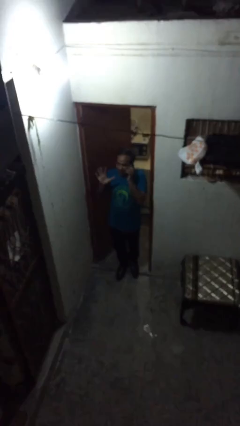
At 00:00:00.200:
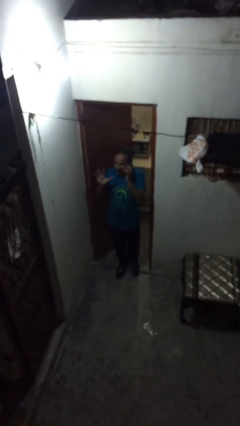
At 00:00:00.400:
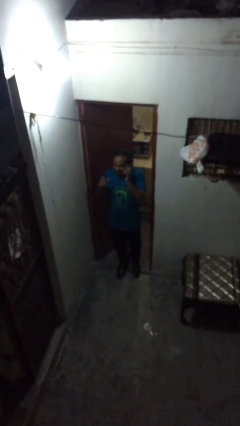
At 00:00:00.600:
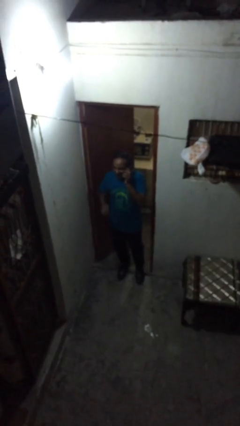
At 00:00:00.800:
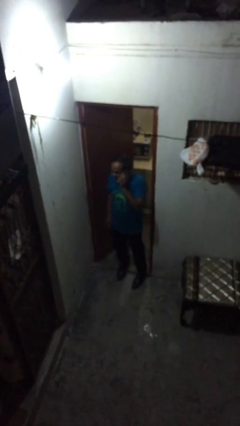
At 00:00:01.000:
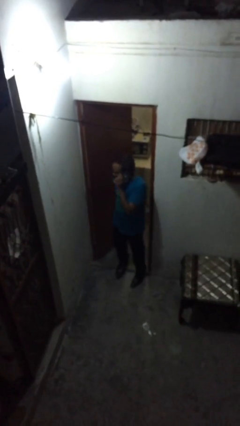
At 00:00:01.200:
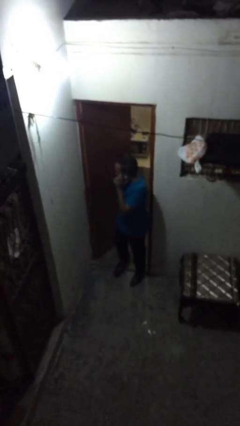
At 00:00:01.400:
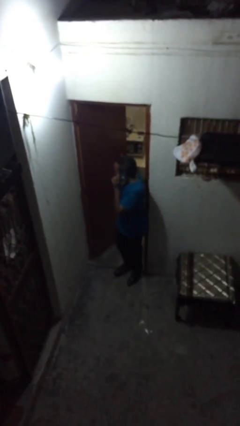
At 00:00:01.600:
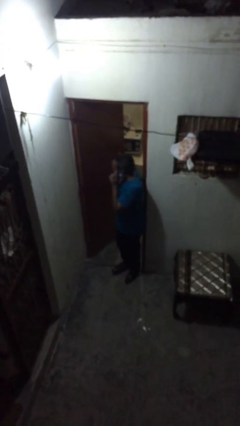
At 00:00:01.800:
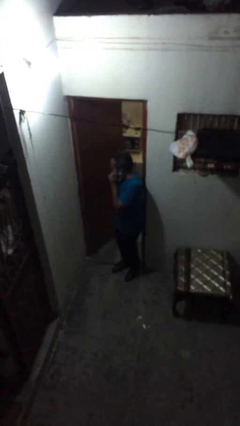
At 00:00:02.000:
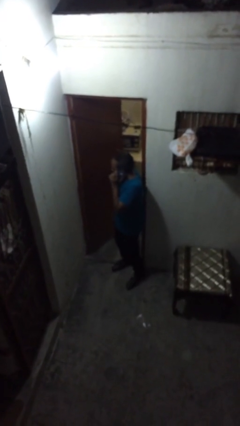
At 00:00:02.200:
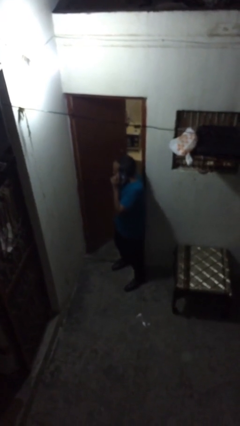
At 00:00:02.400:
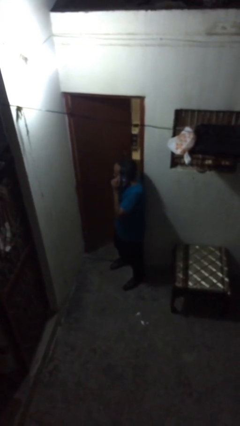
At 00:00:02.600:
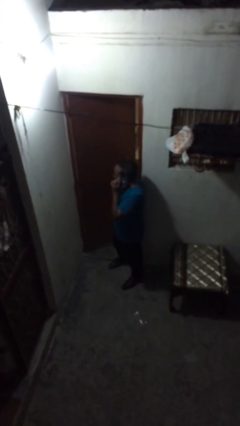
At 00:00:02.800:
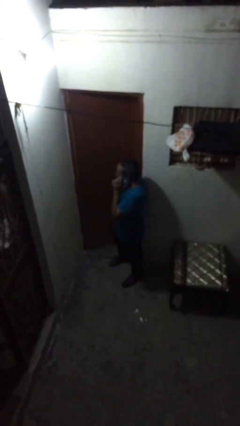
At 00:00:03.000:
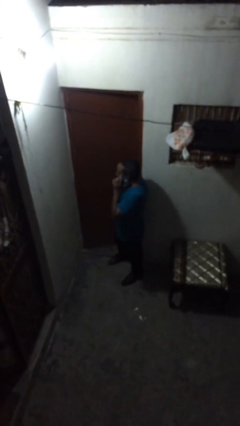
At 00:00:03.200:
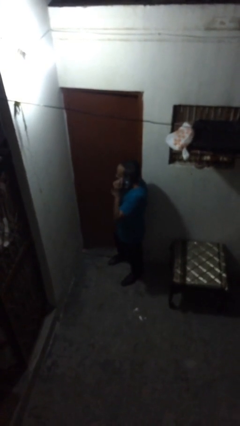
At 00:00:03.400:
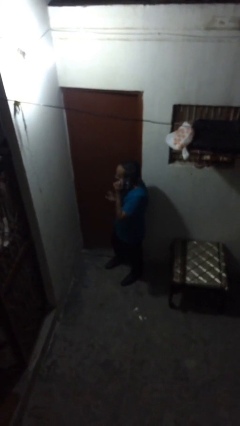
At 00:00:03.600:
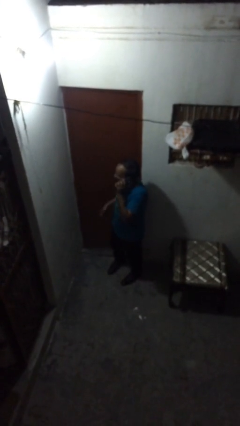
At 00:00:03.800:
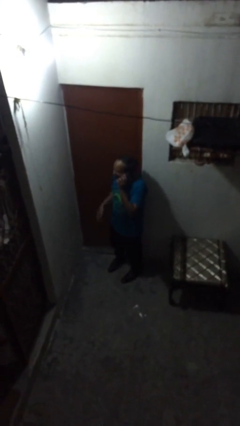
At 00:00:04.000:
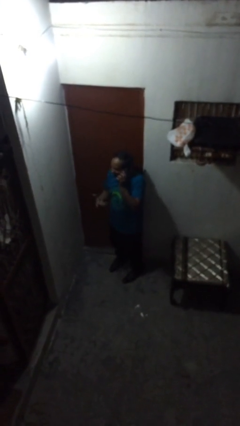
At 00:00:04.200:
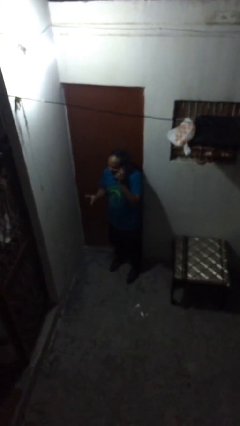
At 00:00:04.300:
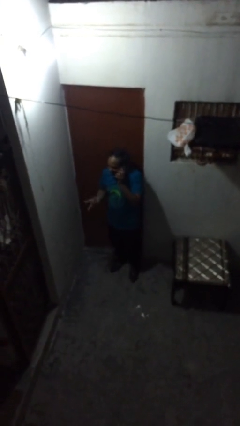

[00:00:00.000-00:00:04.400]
person closes facility door

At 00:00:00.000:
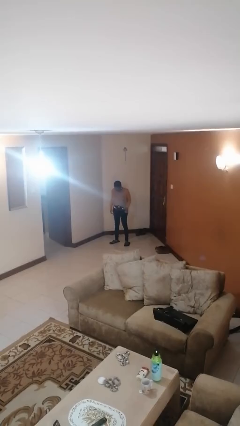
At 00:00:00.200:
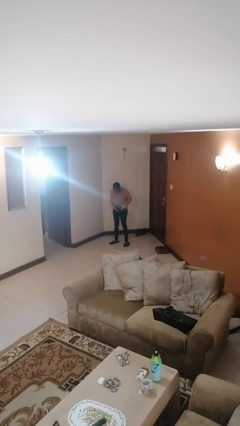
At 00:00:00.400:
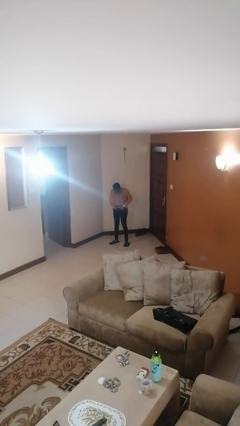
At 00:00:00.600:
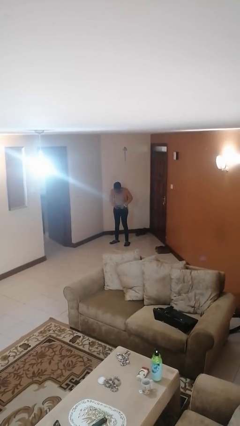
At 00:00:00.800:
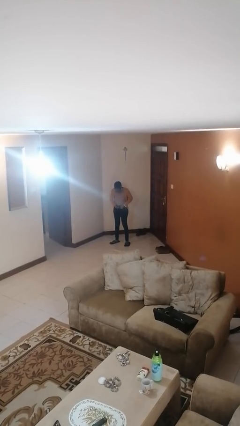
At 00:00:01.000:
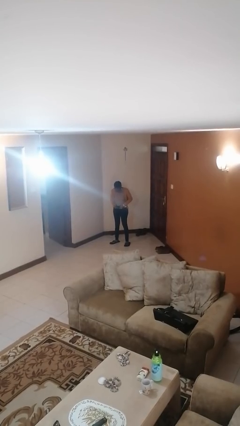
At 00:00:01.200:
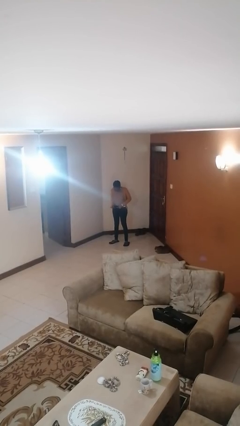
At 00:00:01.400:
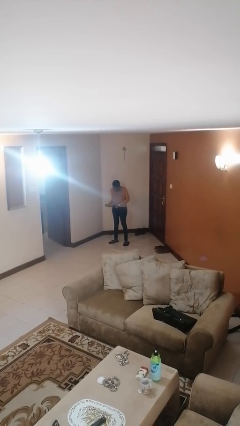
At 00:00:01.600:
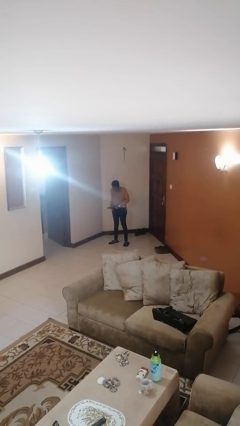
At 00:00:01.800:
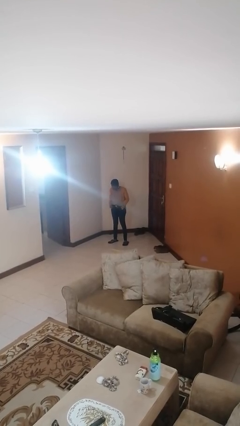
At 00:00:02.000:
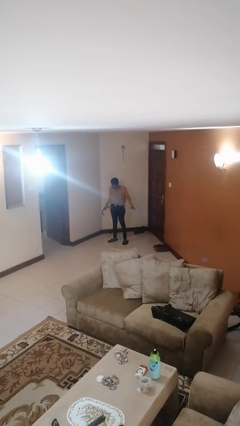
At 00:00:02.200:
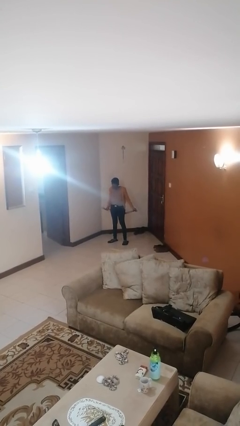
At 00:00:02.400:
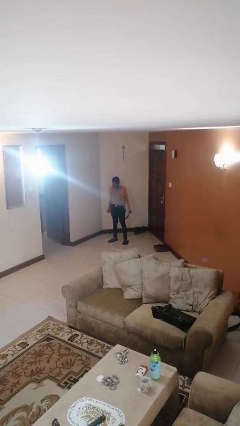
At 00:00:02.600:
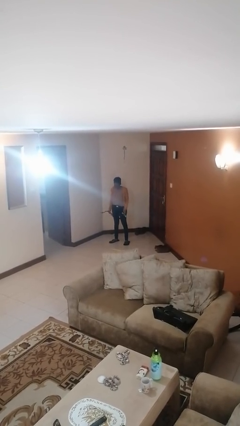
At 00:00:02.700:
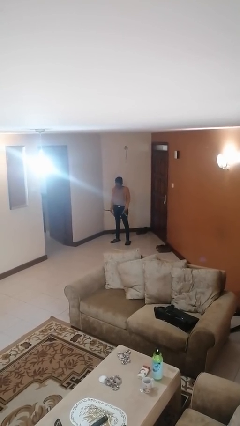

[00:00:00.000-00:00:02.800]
person takes off belt

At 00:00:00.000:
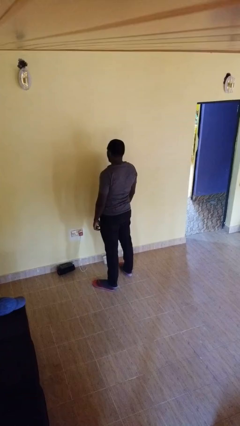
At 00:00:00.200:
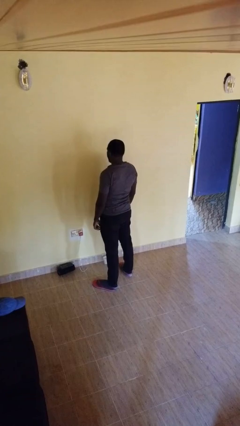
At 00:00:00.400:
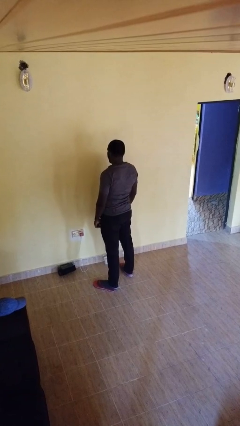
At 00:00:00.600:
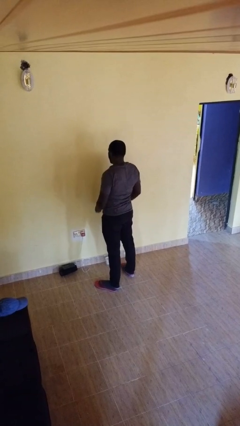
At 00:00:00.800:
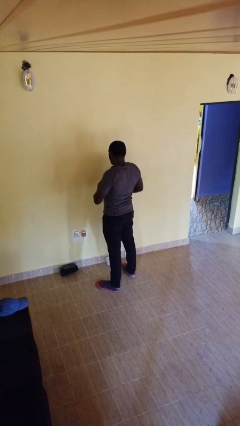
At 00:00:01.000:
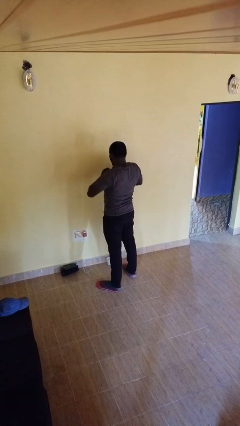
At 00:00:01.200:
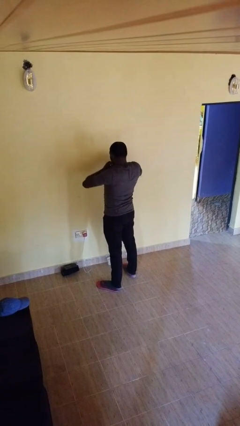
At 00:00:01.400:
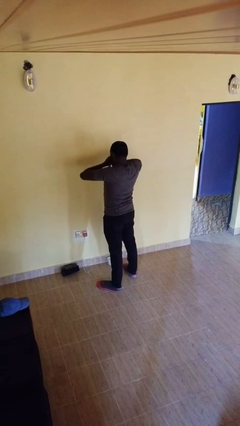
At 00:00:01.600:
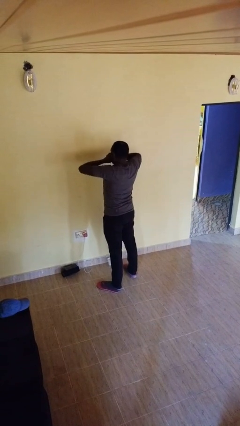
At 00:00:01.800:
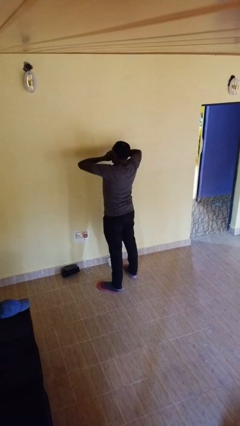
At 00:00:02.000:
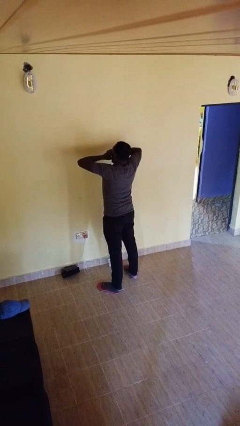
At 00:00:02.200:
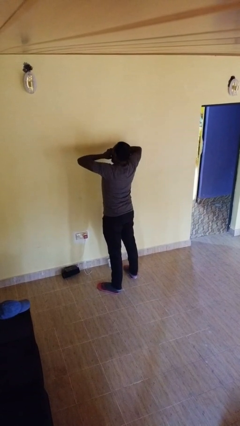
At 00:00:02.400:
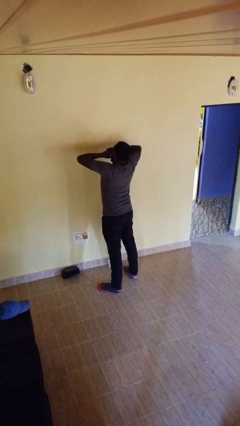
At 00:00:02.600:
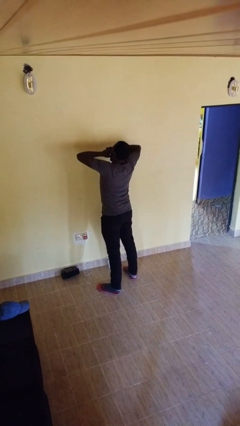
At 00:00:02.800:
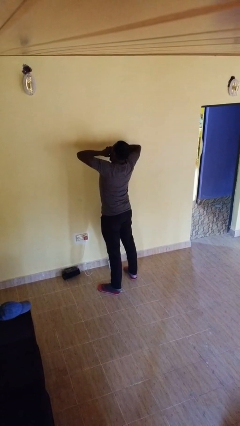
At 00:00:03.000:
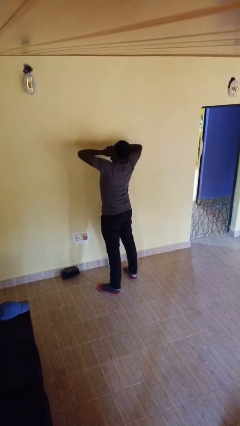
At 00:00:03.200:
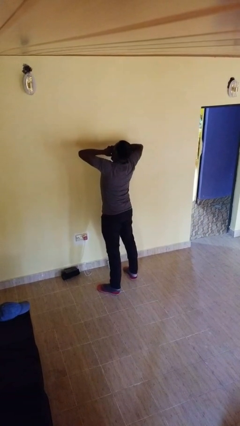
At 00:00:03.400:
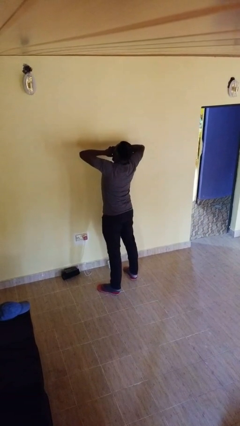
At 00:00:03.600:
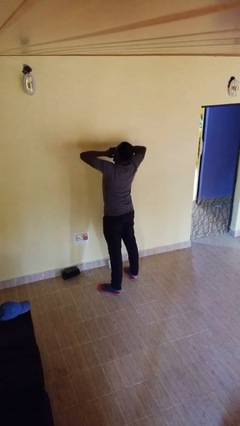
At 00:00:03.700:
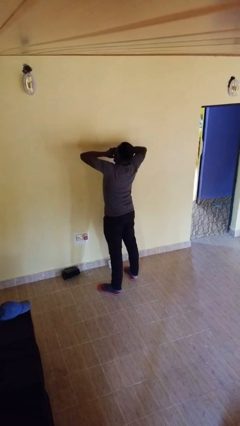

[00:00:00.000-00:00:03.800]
person yawns

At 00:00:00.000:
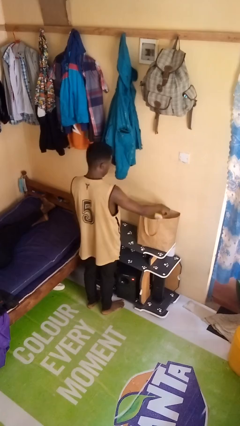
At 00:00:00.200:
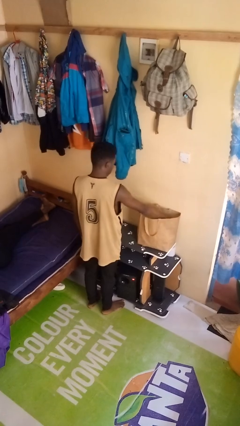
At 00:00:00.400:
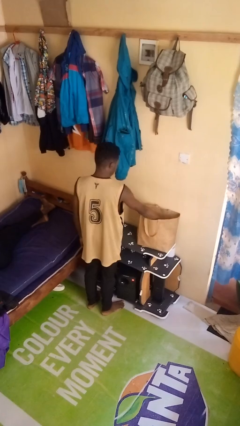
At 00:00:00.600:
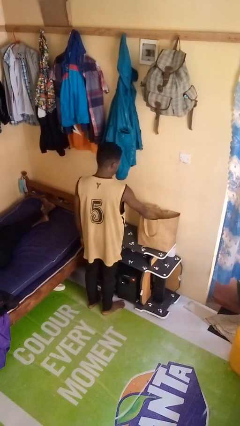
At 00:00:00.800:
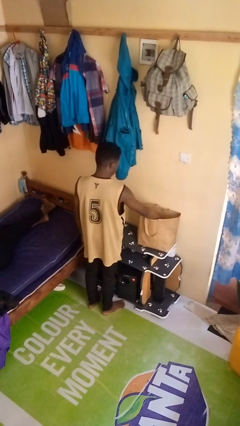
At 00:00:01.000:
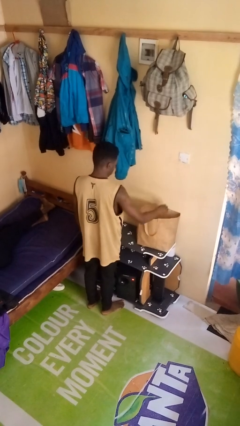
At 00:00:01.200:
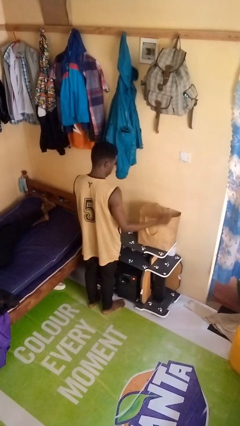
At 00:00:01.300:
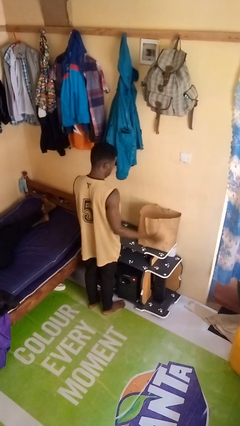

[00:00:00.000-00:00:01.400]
person puts object into bag

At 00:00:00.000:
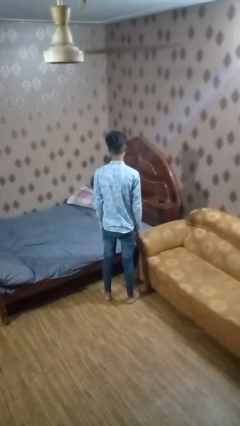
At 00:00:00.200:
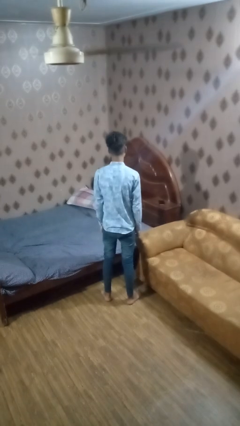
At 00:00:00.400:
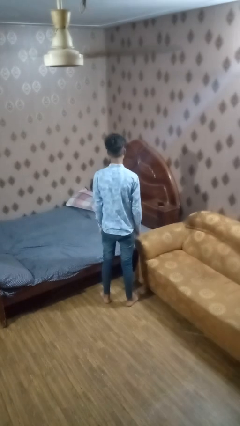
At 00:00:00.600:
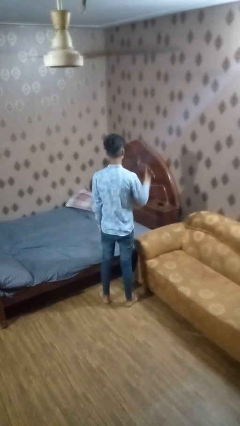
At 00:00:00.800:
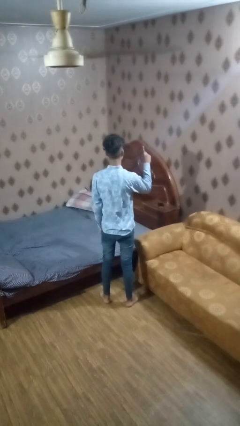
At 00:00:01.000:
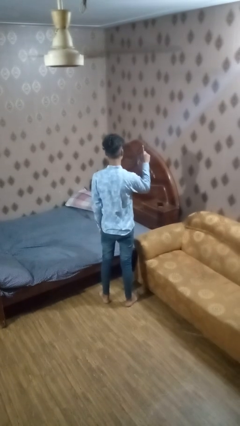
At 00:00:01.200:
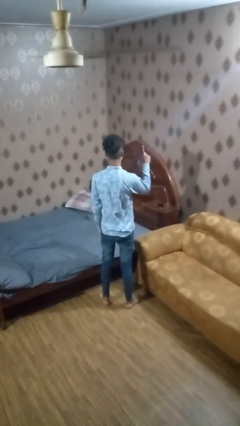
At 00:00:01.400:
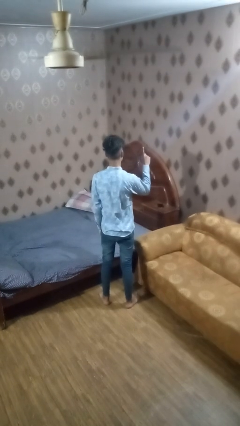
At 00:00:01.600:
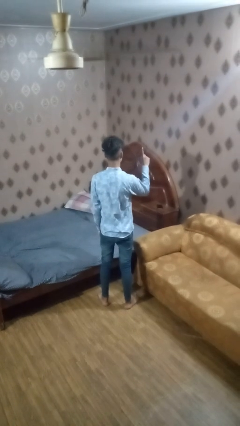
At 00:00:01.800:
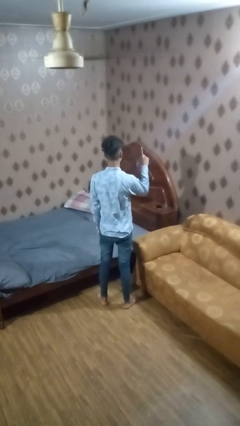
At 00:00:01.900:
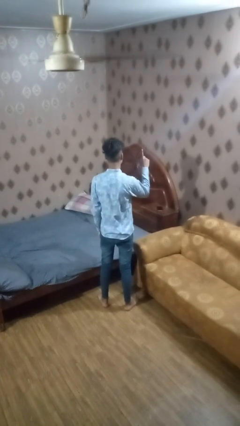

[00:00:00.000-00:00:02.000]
person gestures number one

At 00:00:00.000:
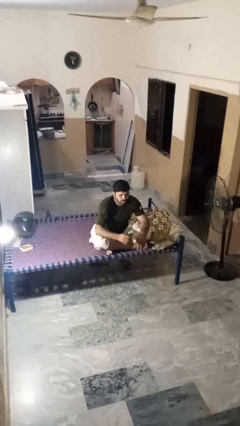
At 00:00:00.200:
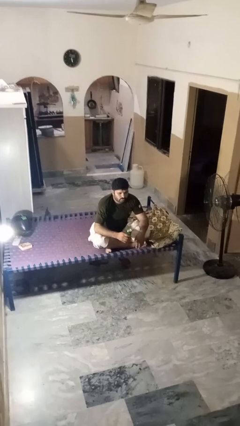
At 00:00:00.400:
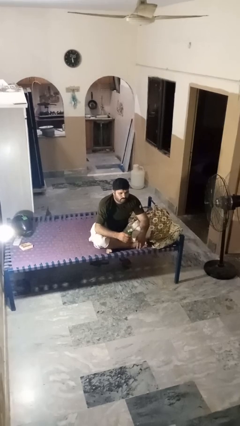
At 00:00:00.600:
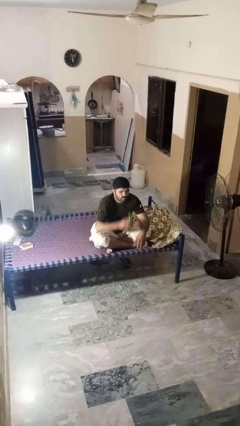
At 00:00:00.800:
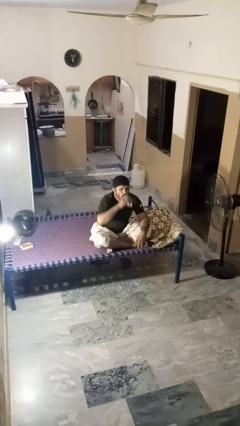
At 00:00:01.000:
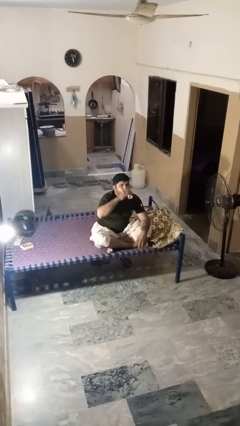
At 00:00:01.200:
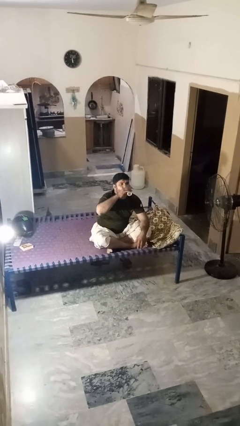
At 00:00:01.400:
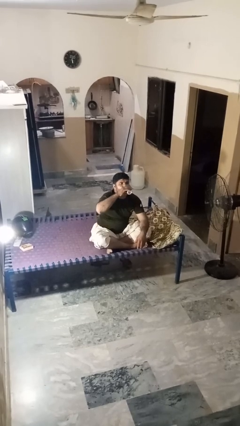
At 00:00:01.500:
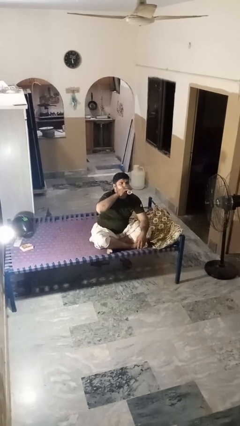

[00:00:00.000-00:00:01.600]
person drinks from beverage can

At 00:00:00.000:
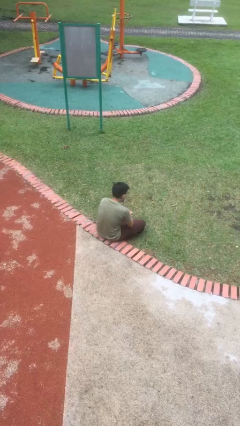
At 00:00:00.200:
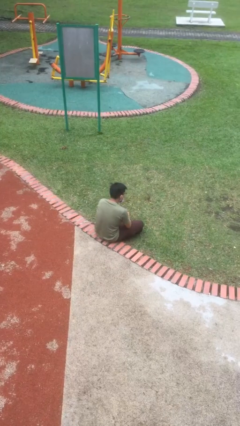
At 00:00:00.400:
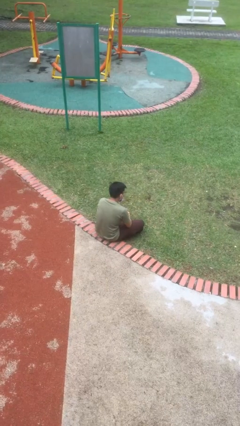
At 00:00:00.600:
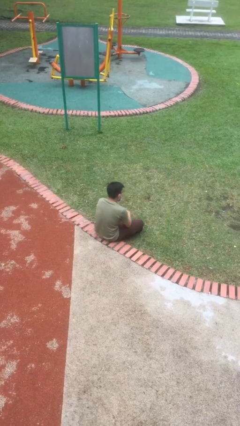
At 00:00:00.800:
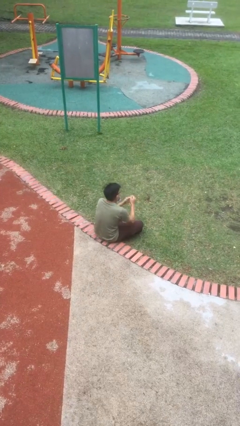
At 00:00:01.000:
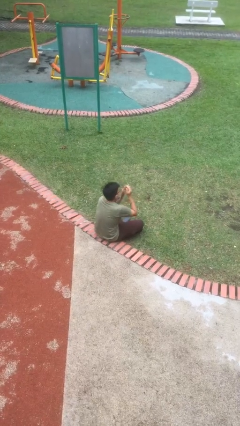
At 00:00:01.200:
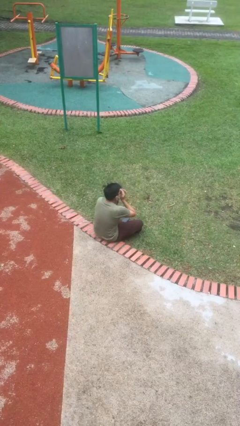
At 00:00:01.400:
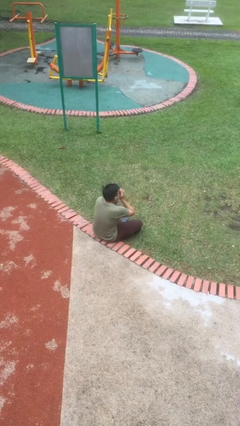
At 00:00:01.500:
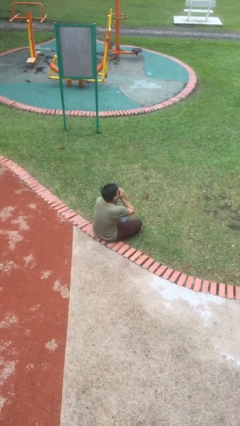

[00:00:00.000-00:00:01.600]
person sneezes into hand
